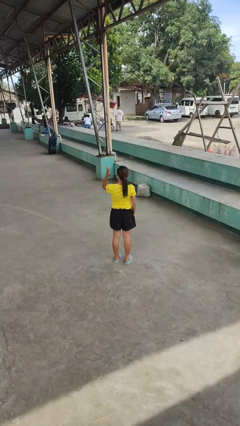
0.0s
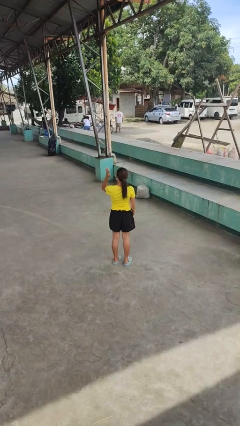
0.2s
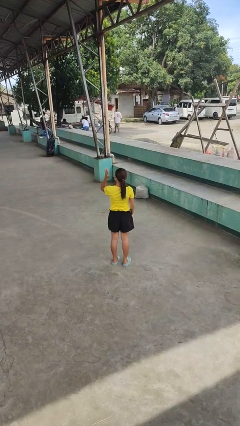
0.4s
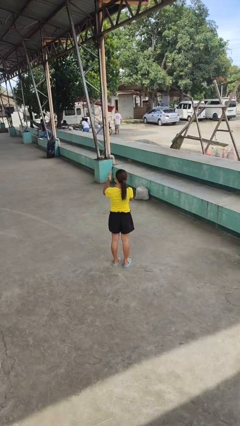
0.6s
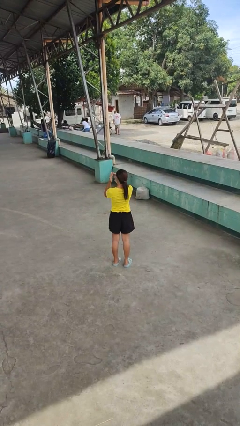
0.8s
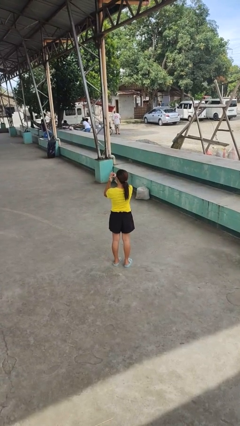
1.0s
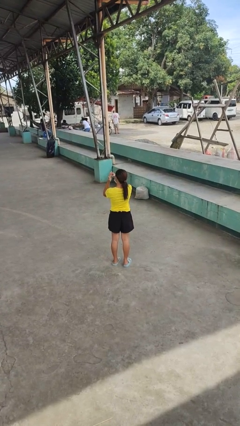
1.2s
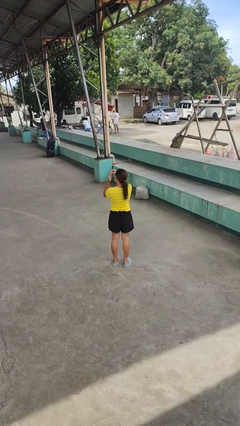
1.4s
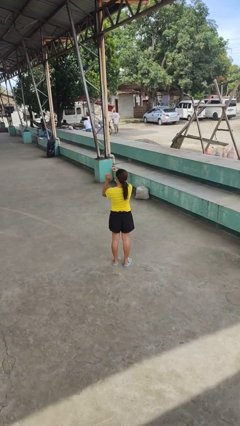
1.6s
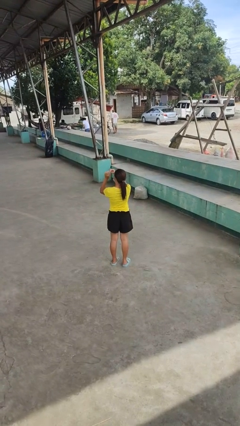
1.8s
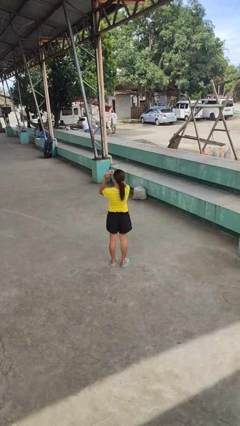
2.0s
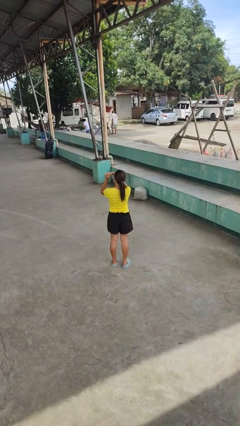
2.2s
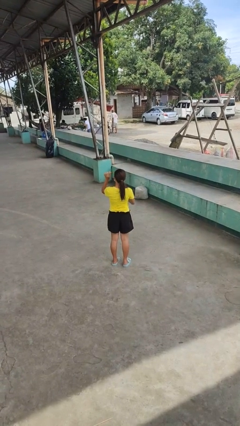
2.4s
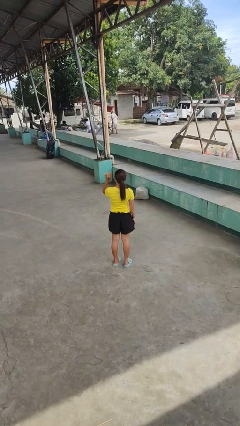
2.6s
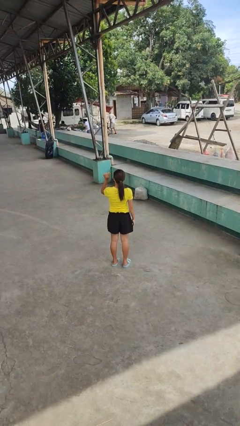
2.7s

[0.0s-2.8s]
person takes off ring

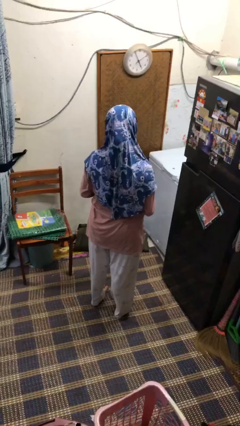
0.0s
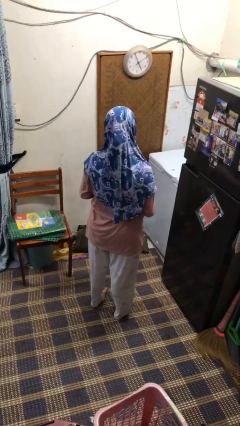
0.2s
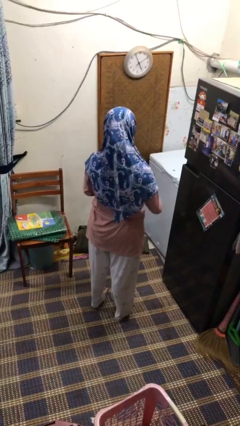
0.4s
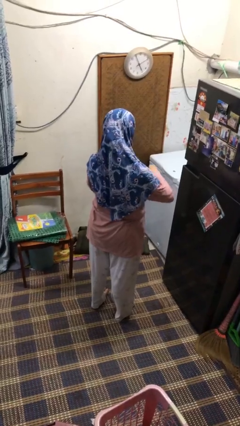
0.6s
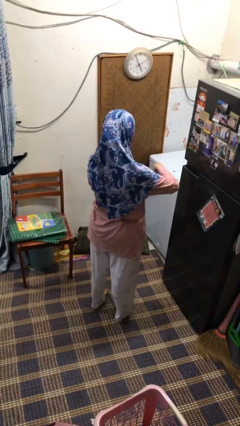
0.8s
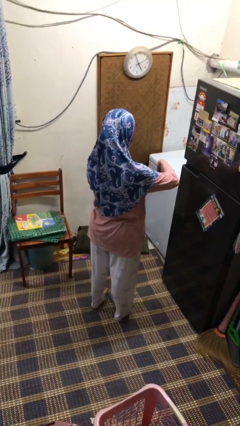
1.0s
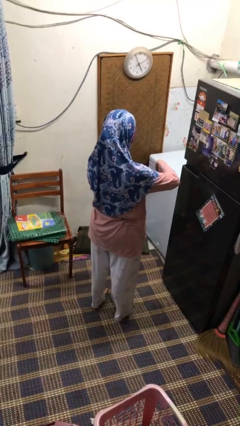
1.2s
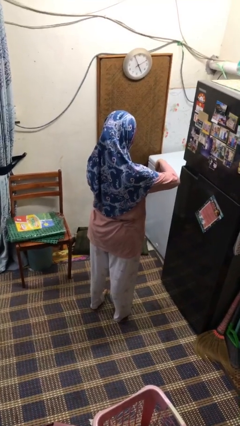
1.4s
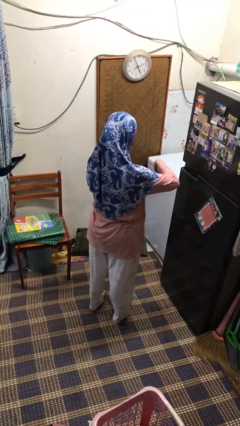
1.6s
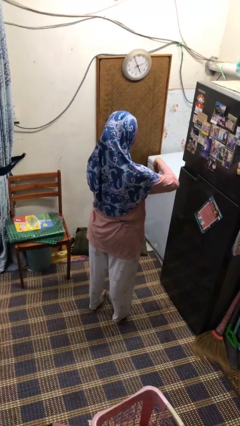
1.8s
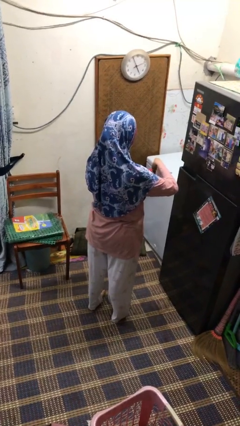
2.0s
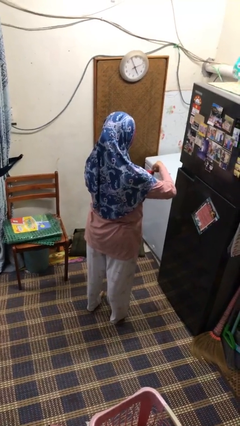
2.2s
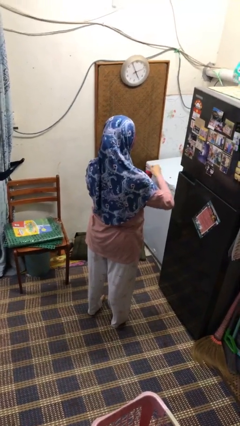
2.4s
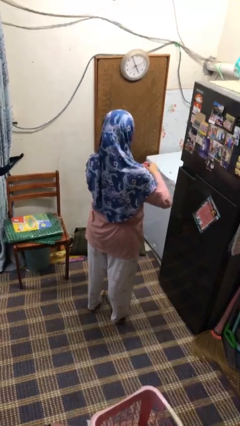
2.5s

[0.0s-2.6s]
person opens beverage can

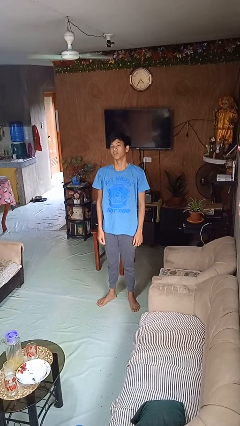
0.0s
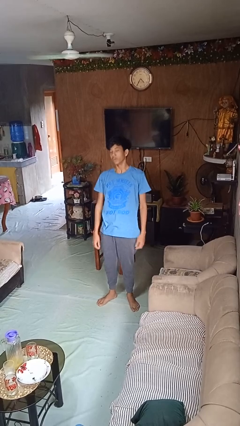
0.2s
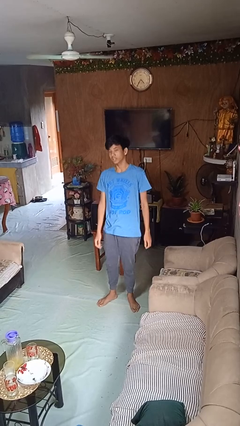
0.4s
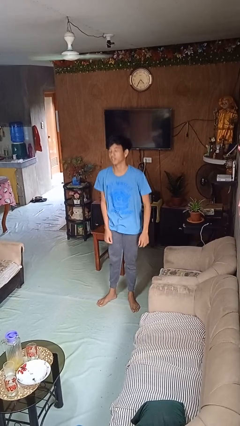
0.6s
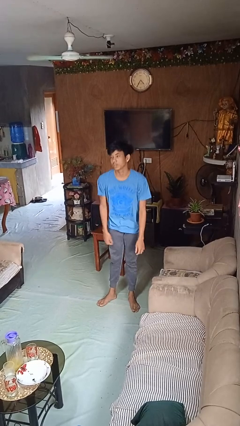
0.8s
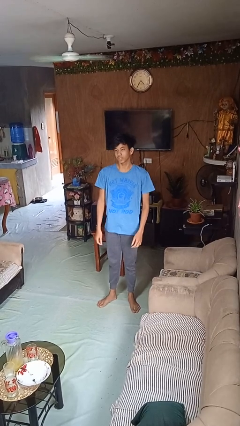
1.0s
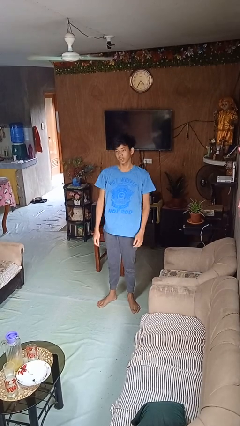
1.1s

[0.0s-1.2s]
person dances in place

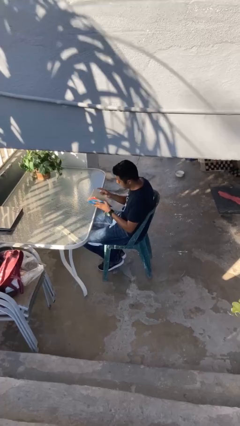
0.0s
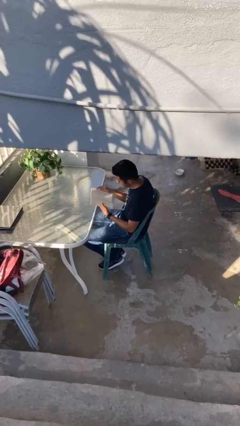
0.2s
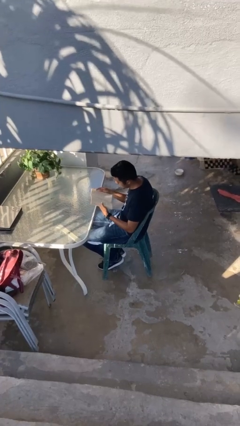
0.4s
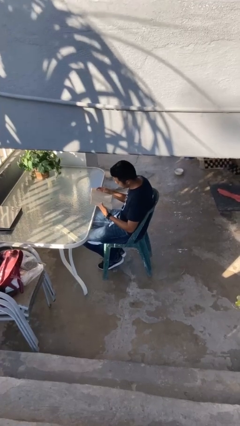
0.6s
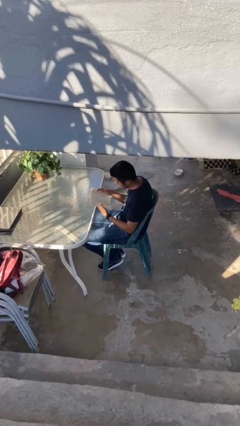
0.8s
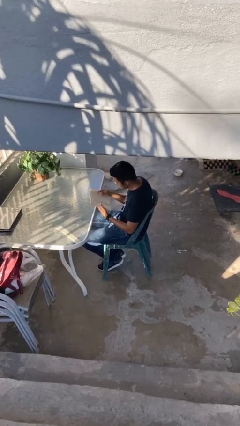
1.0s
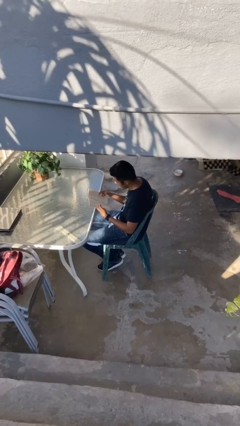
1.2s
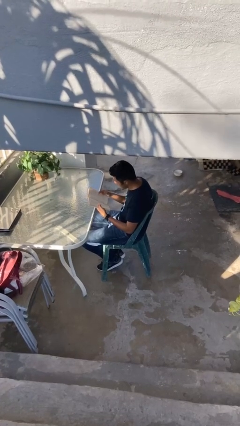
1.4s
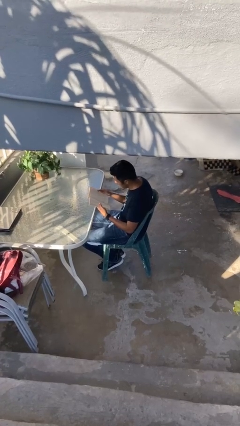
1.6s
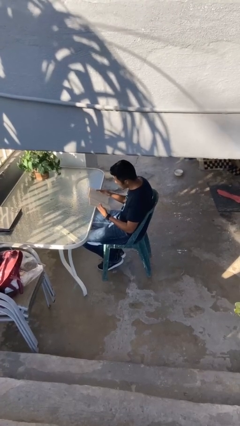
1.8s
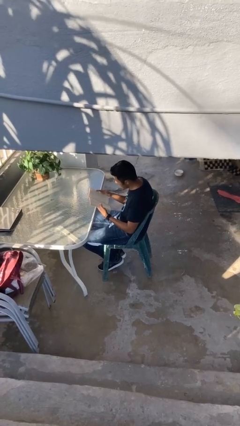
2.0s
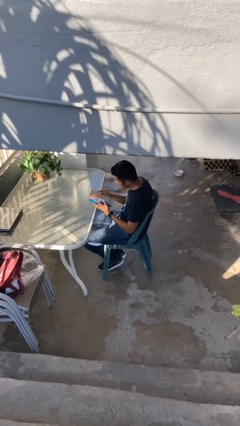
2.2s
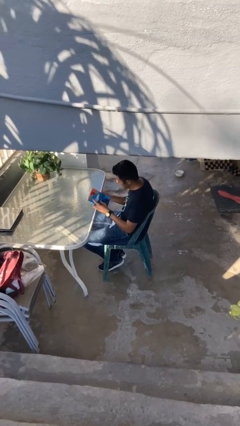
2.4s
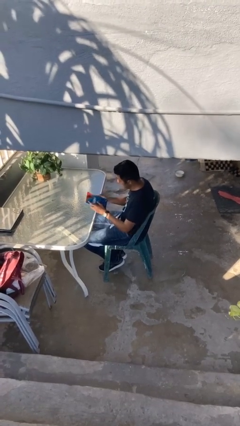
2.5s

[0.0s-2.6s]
person reads document

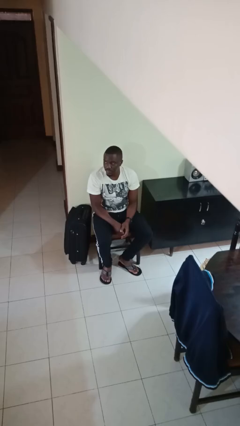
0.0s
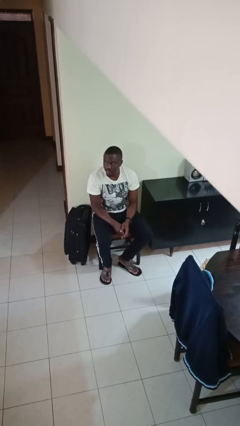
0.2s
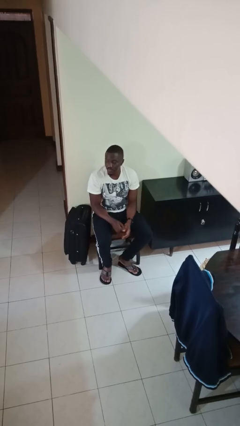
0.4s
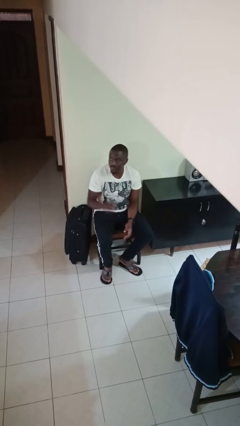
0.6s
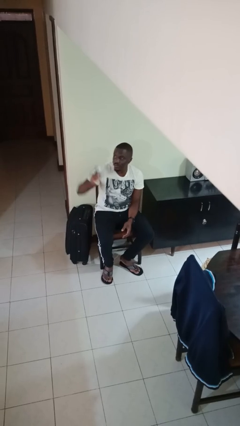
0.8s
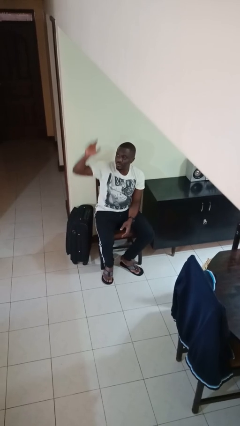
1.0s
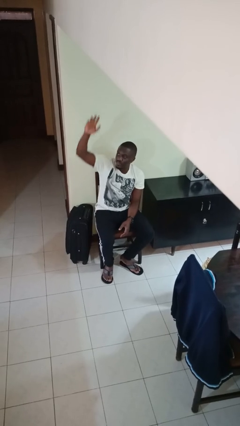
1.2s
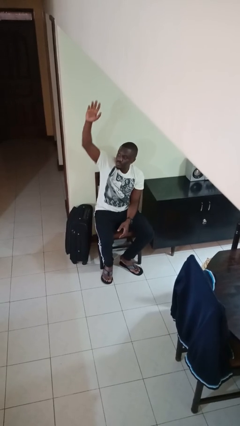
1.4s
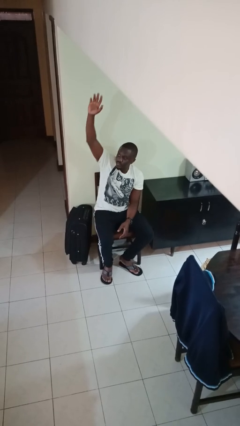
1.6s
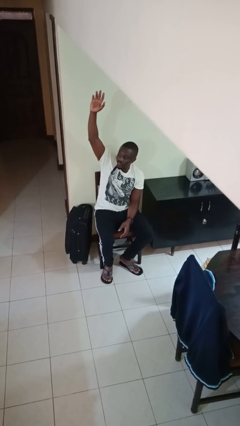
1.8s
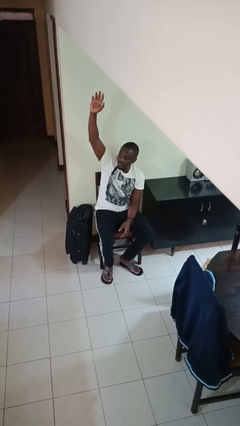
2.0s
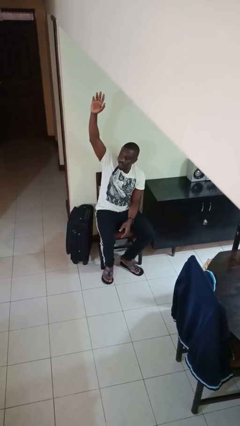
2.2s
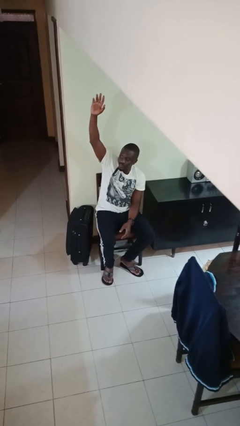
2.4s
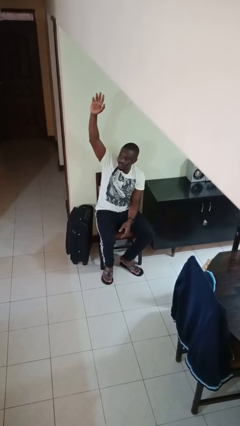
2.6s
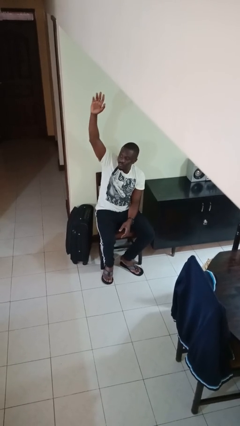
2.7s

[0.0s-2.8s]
person gestures raise hand

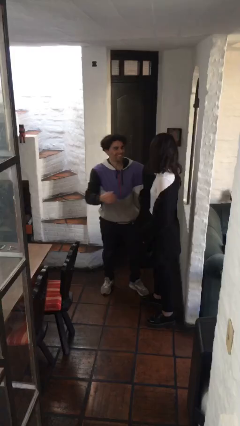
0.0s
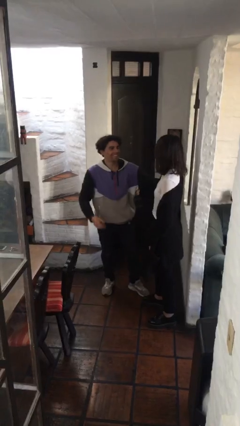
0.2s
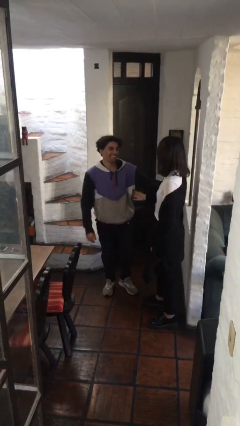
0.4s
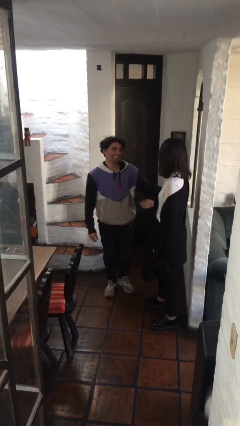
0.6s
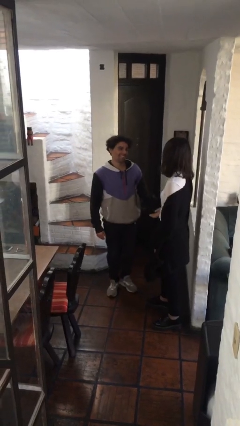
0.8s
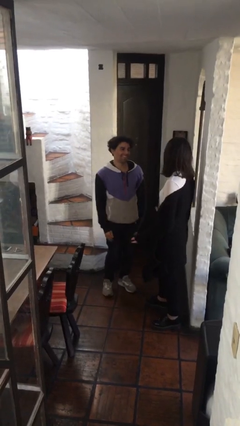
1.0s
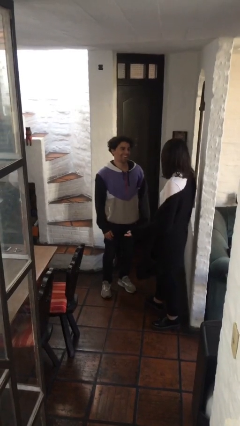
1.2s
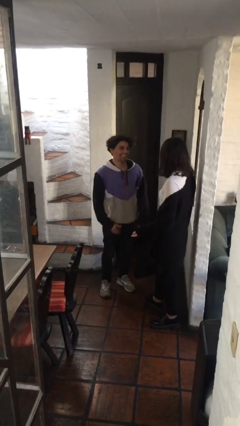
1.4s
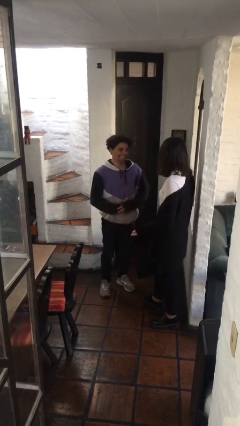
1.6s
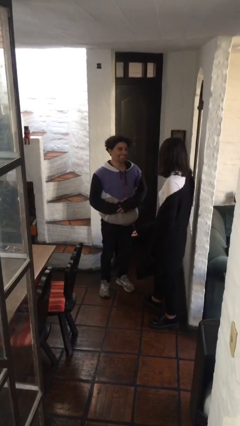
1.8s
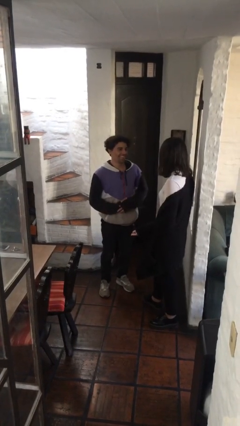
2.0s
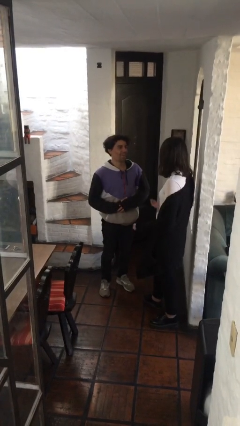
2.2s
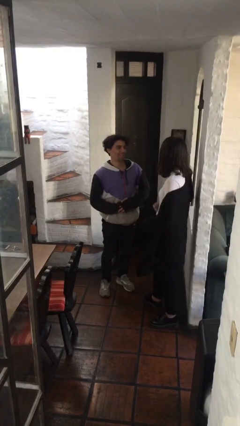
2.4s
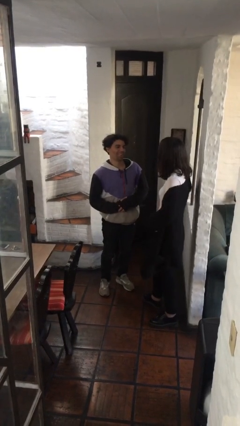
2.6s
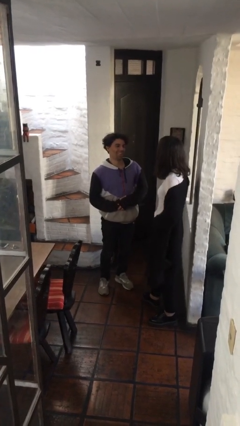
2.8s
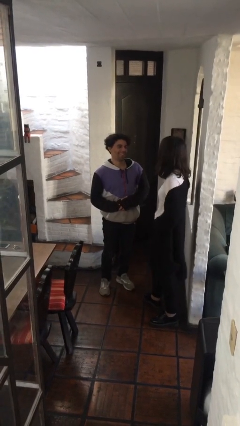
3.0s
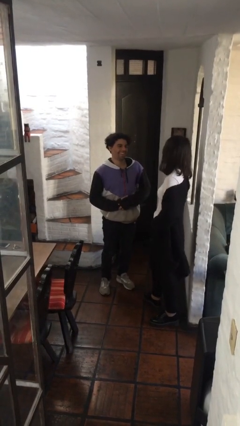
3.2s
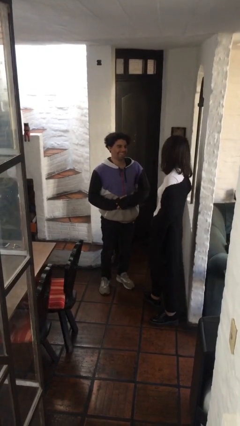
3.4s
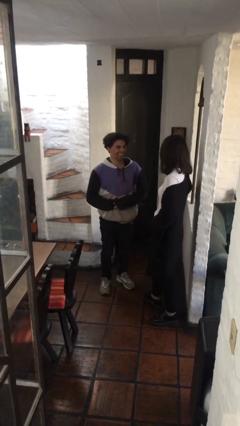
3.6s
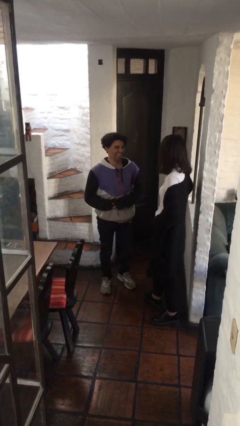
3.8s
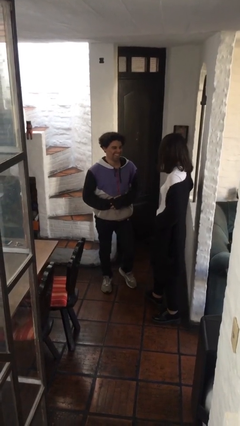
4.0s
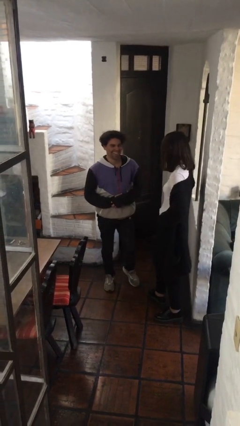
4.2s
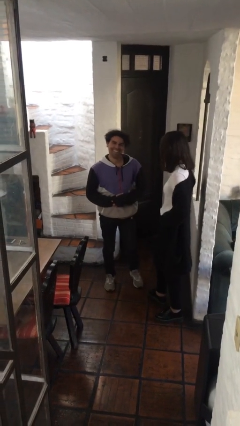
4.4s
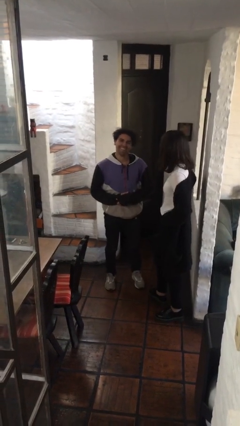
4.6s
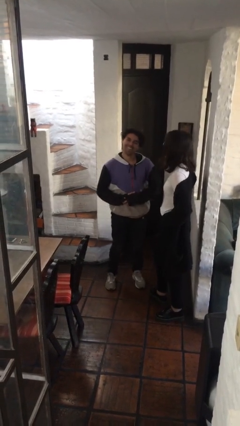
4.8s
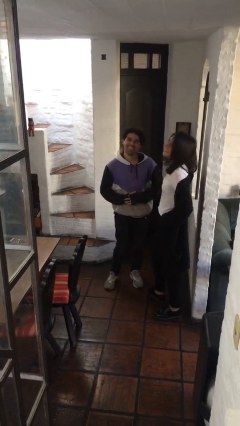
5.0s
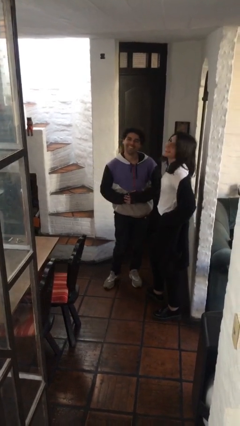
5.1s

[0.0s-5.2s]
person talks to person

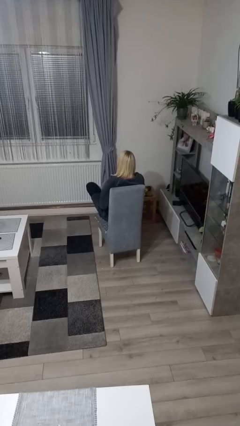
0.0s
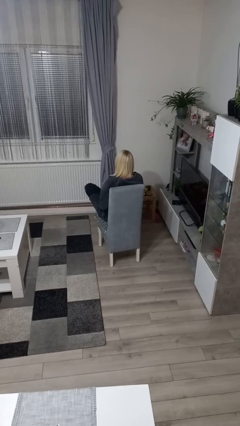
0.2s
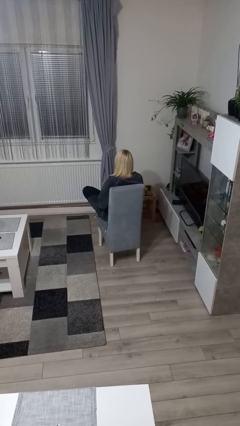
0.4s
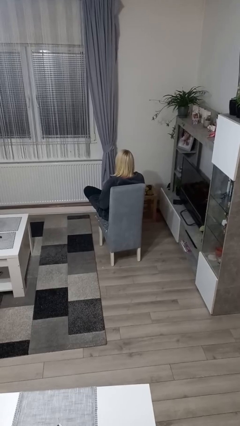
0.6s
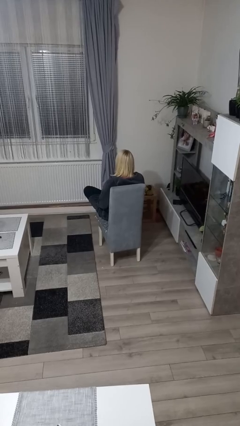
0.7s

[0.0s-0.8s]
person crosses legs
